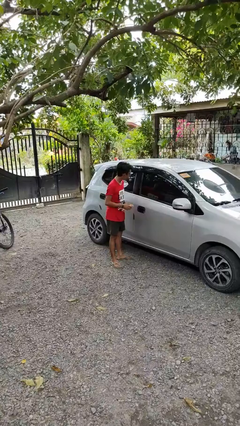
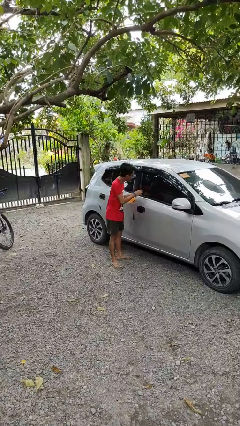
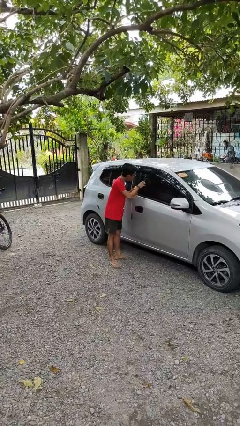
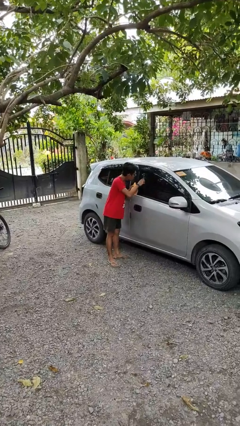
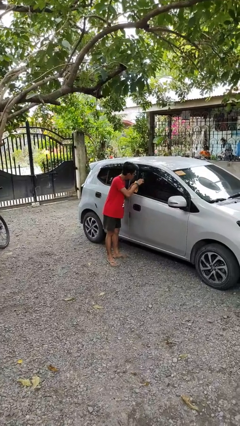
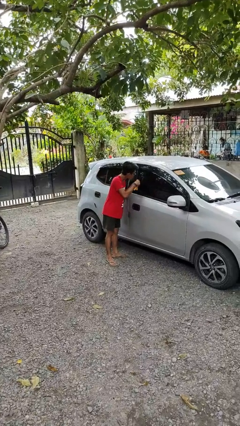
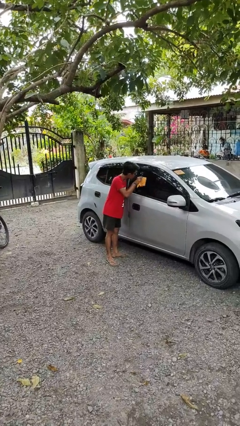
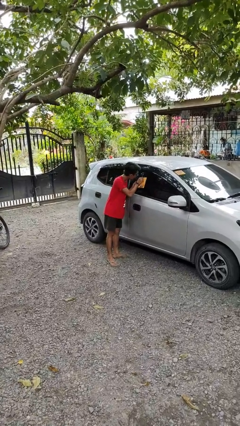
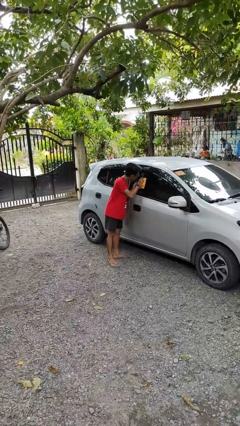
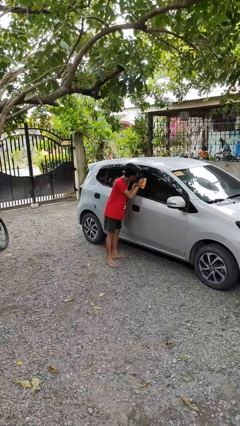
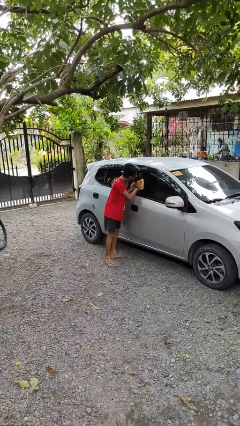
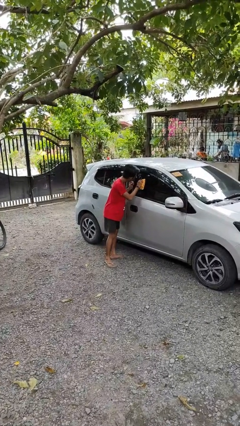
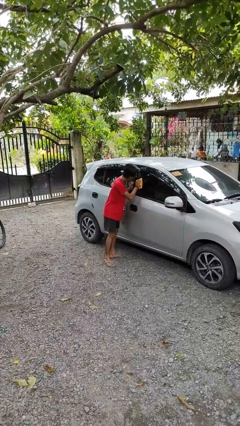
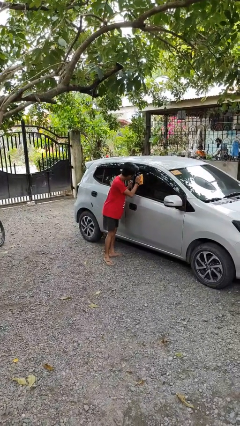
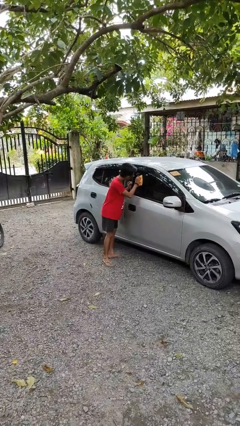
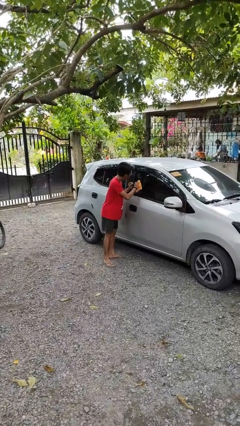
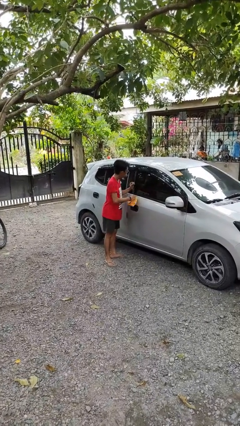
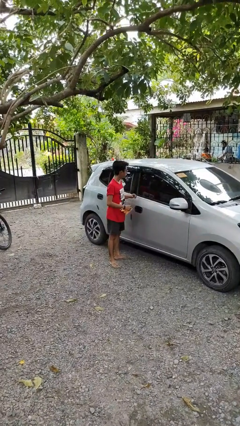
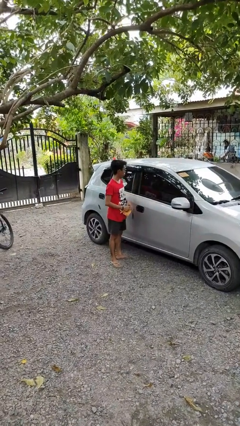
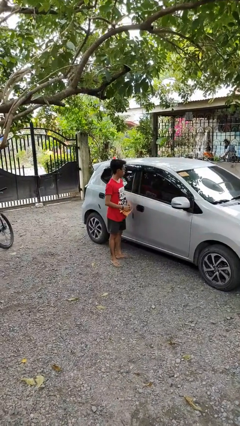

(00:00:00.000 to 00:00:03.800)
person polishes car with rag

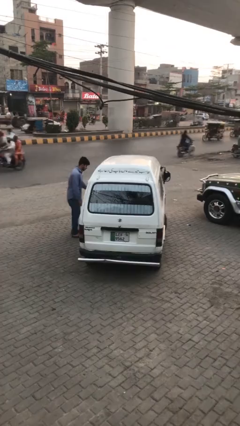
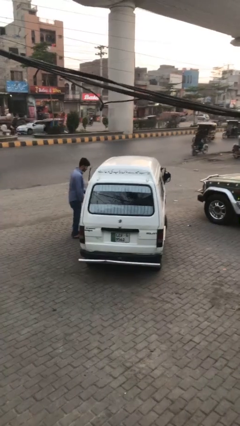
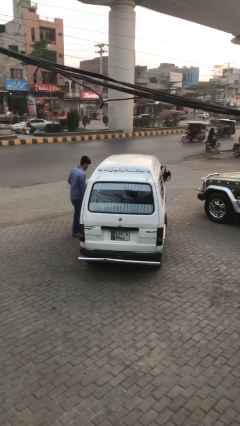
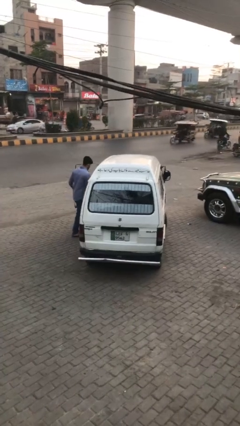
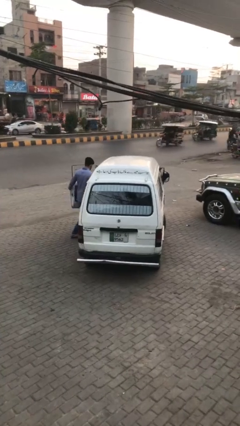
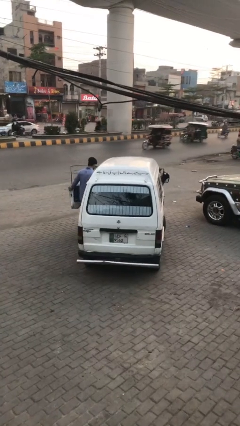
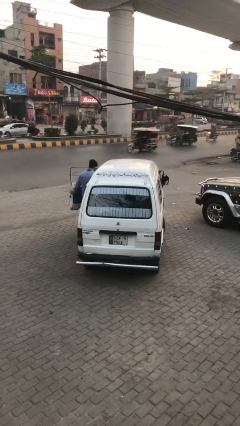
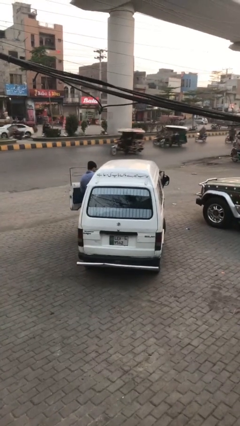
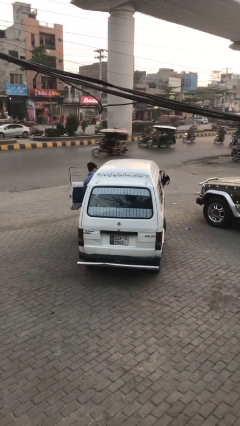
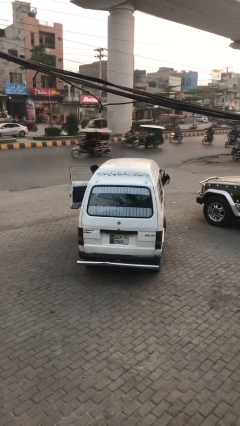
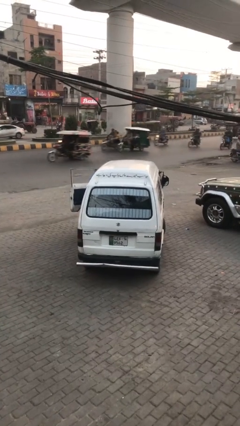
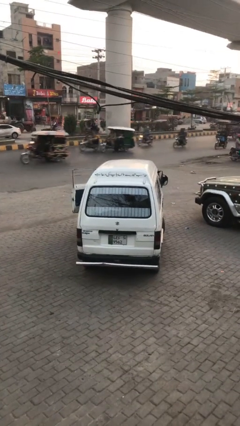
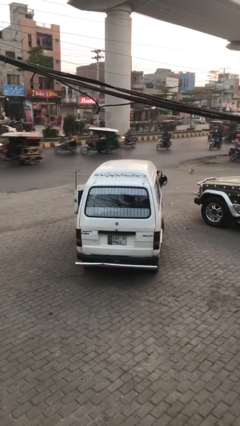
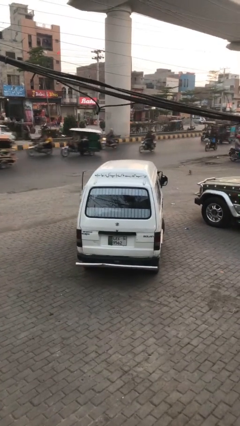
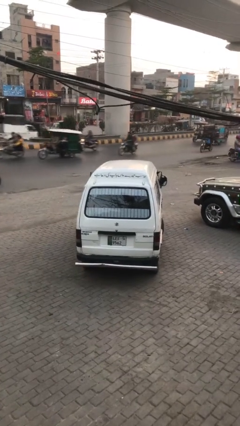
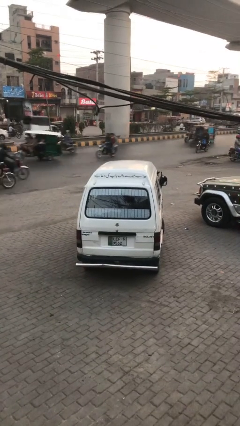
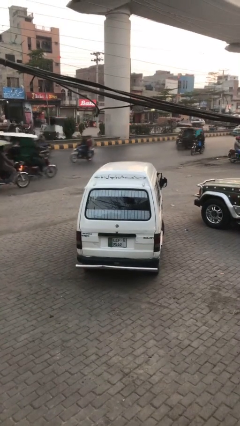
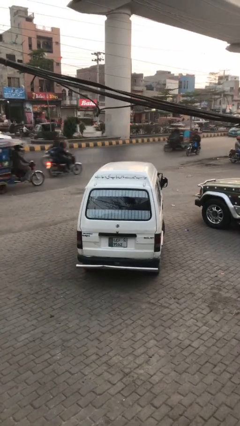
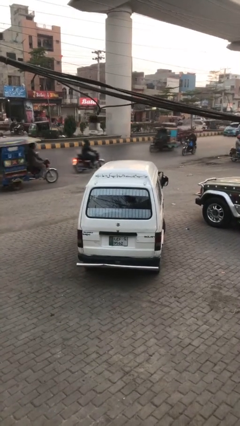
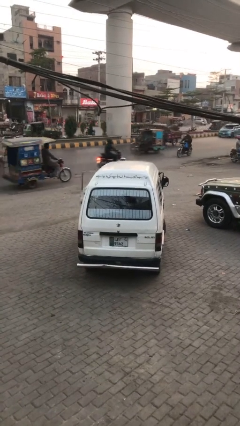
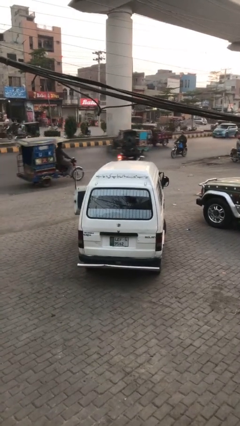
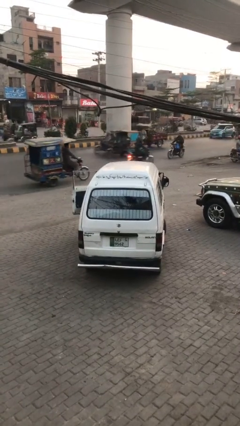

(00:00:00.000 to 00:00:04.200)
car picks up person

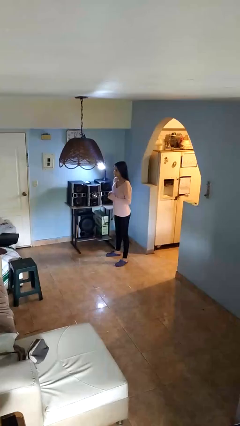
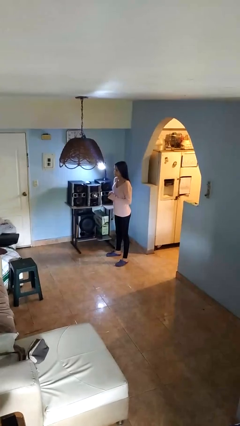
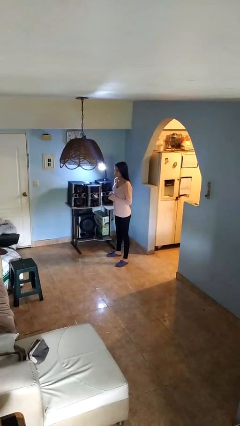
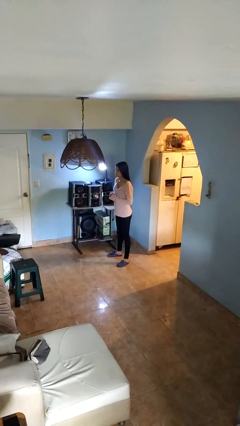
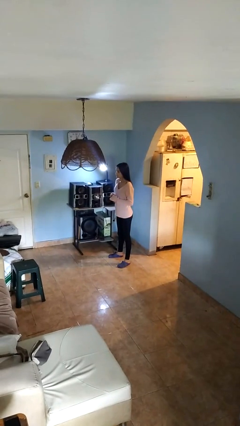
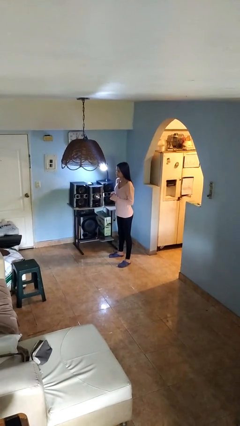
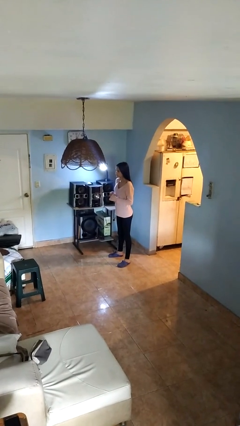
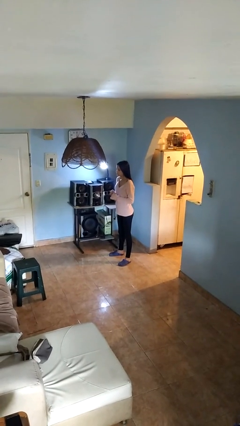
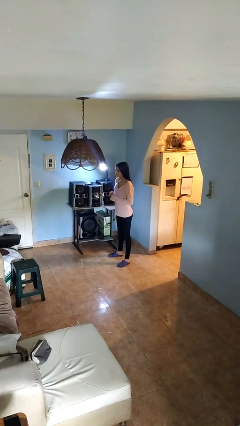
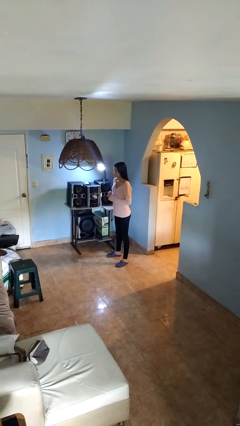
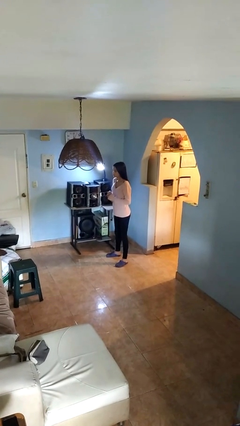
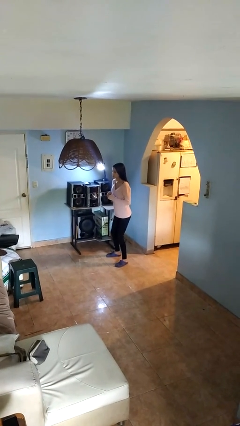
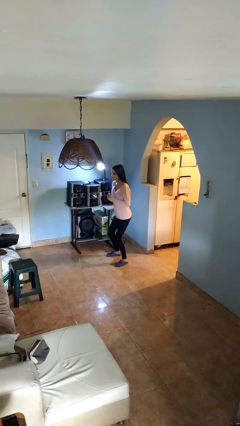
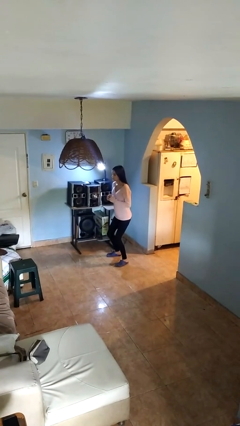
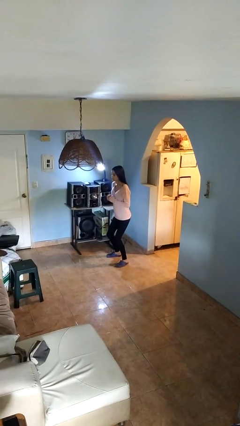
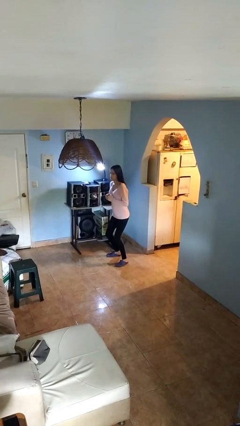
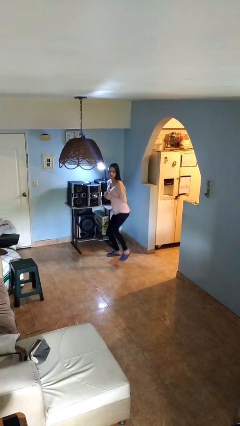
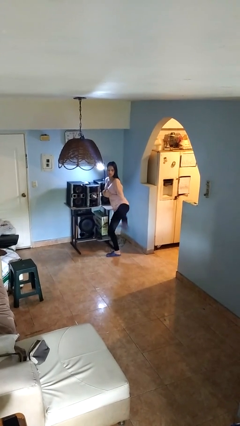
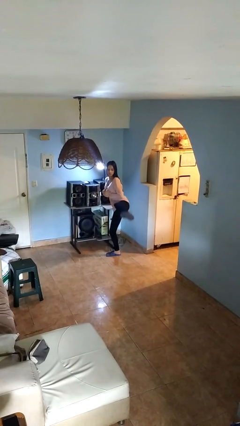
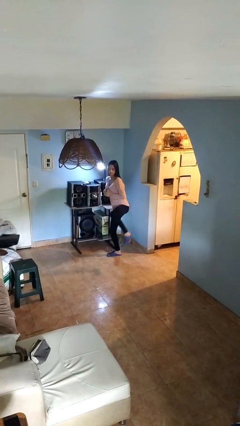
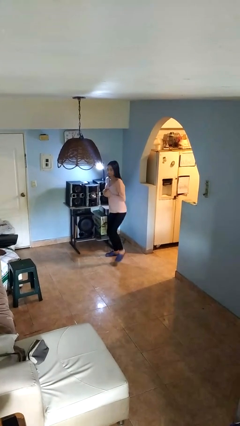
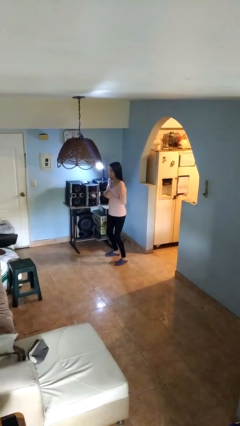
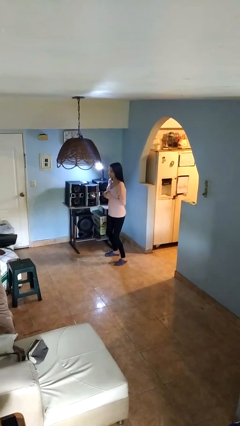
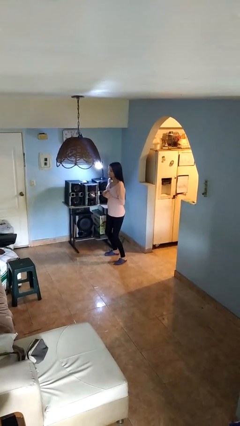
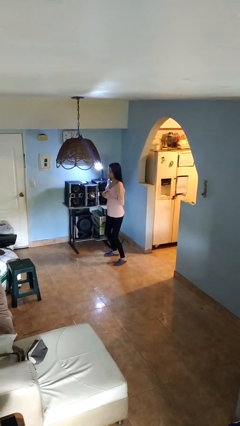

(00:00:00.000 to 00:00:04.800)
person karate kicks

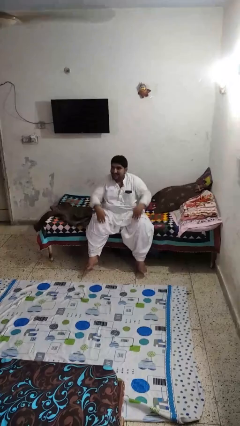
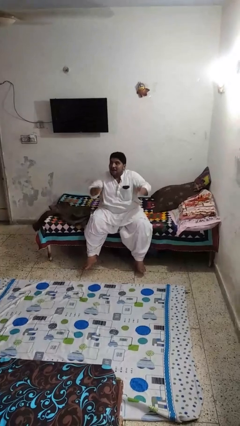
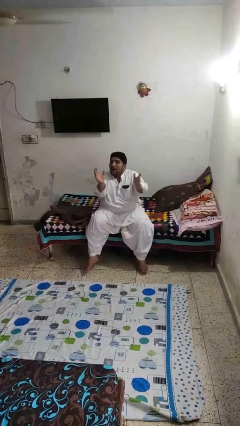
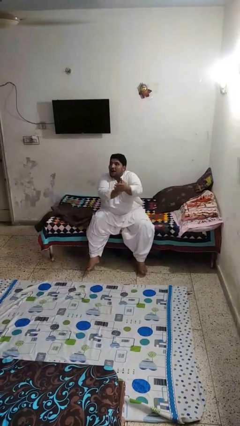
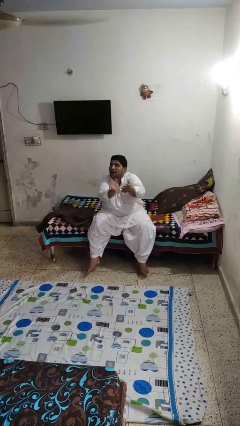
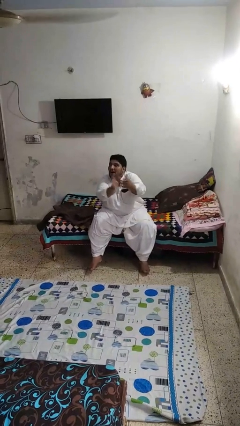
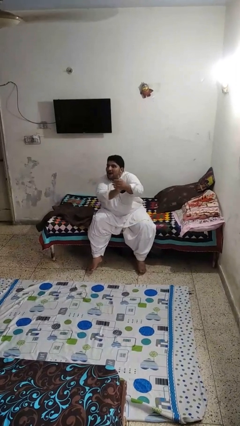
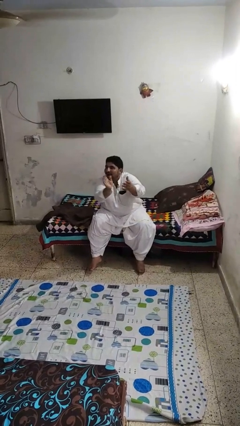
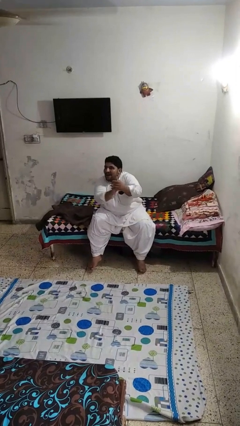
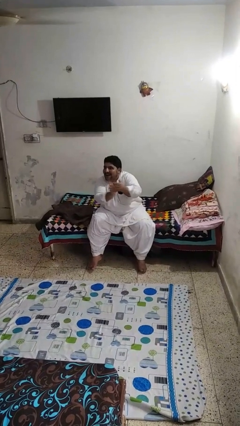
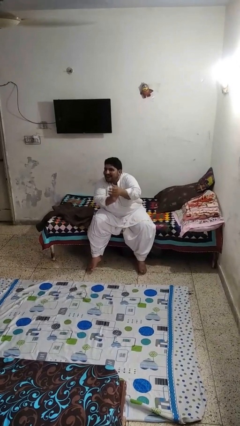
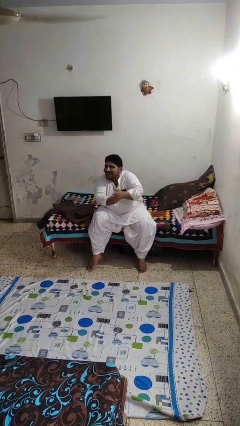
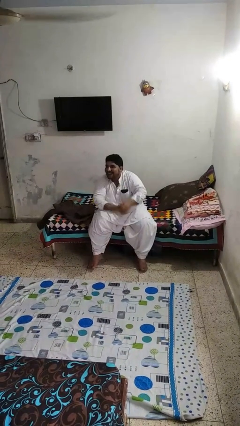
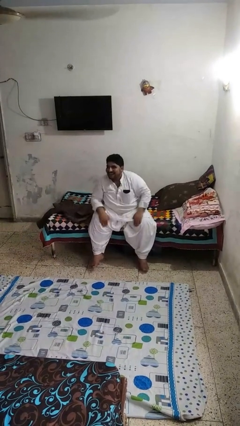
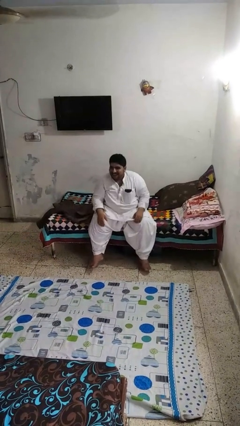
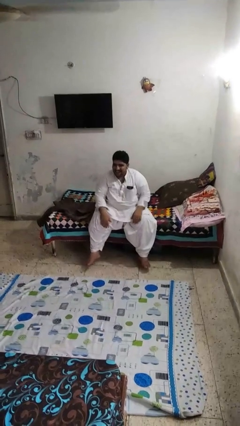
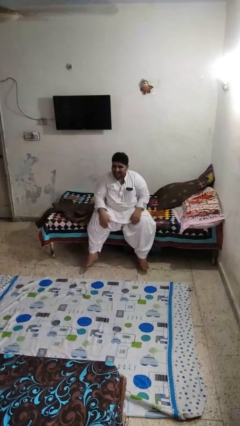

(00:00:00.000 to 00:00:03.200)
person claps hands

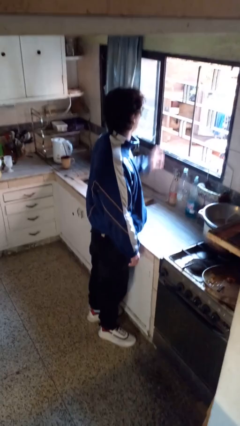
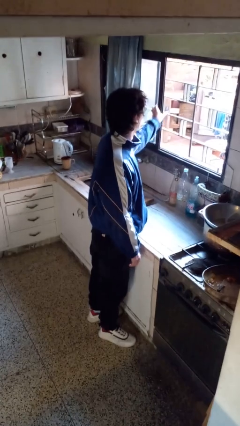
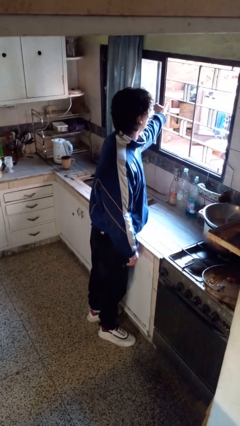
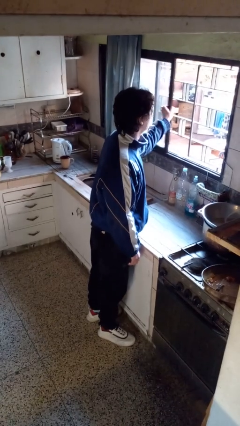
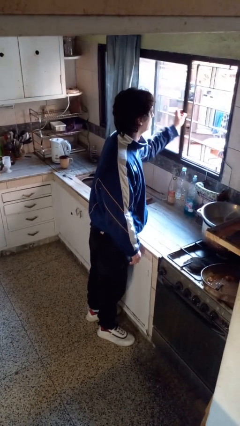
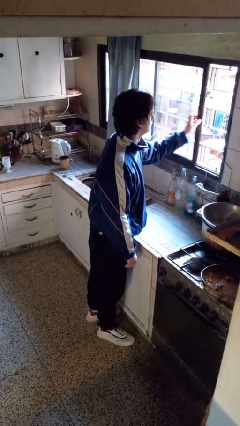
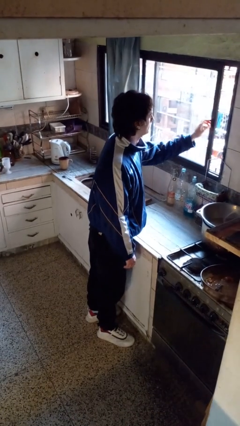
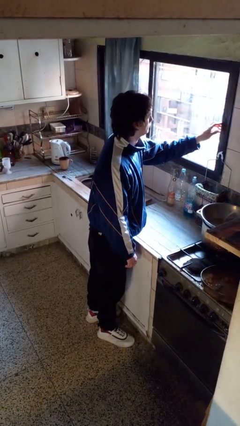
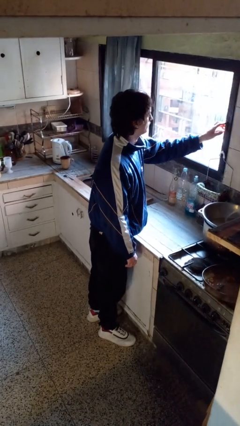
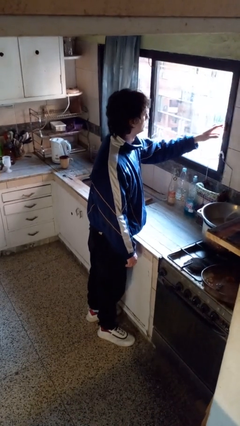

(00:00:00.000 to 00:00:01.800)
person closes home window
